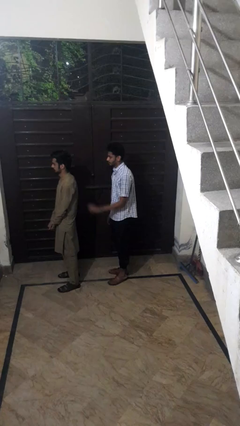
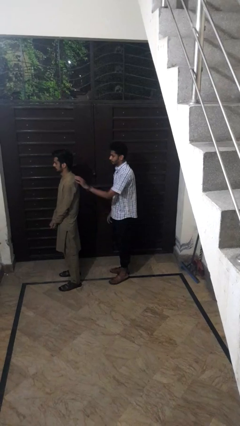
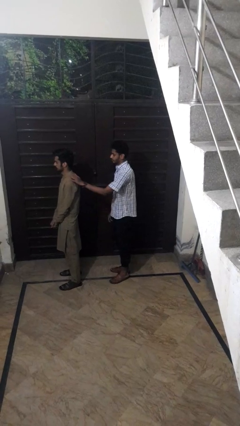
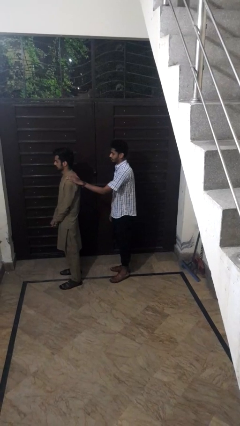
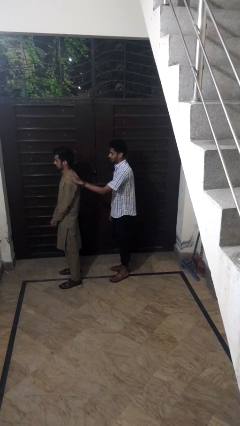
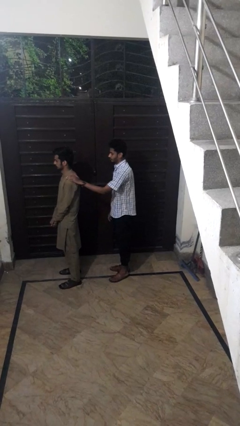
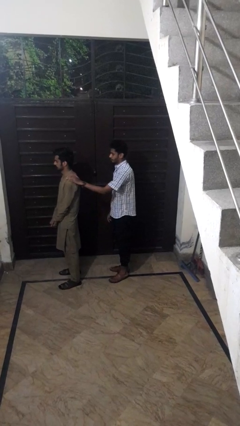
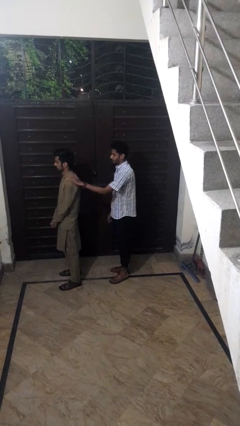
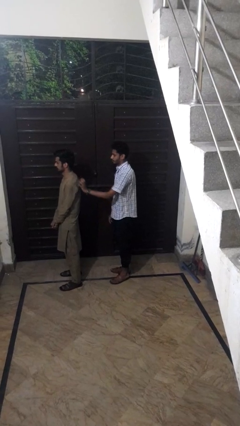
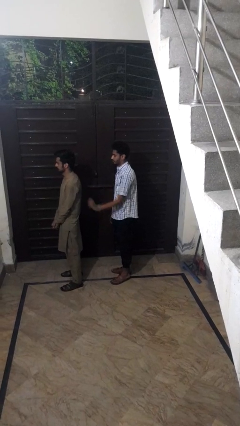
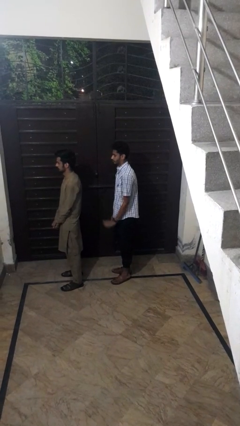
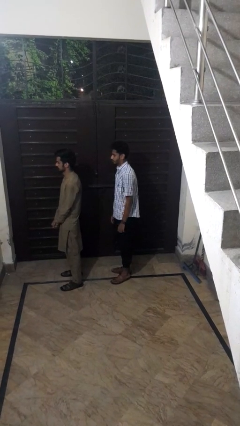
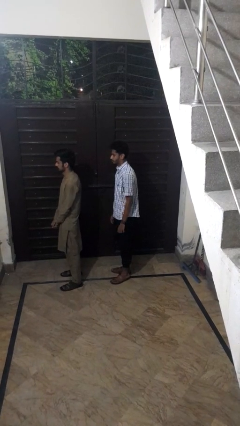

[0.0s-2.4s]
person touches back of person

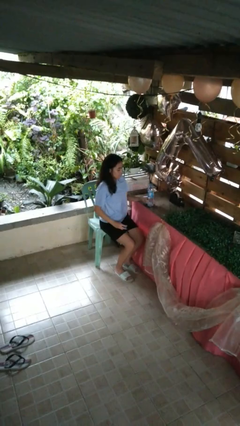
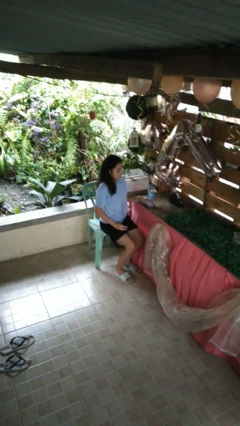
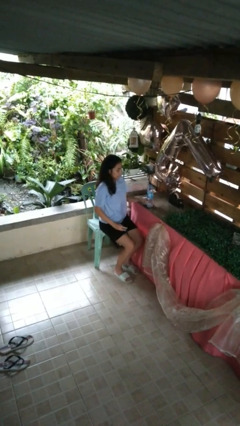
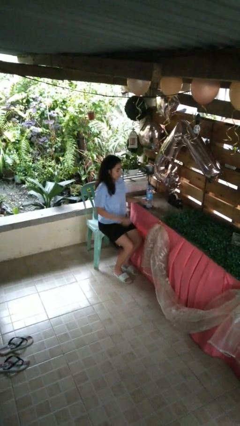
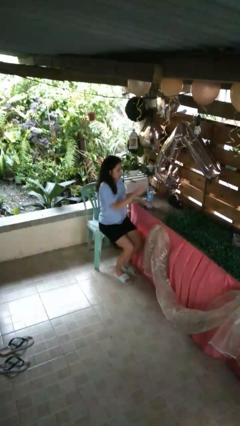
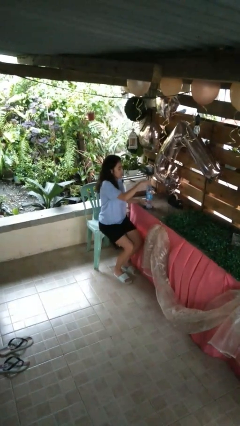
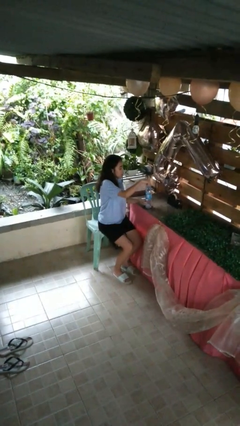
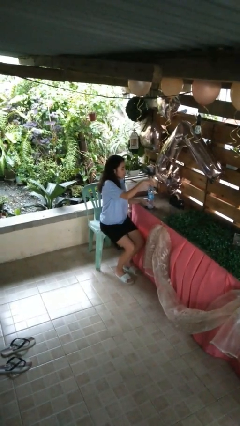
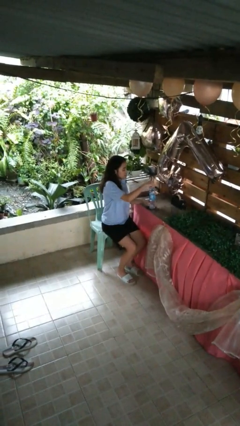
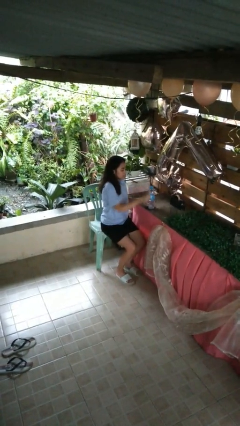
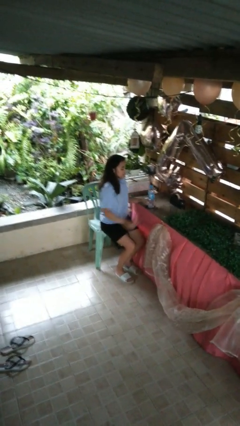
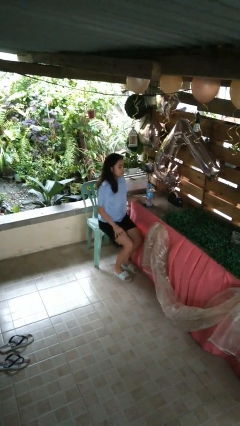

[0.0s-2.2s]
person screws lid to bottle

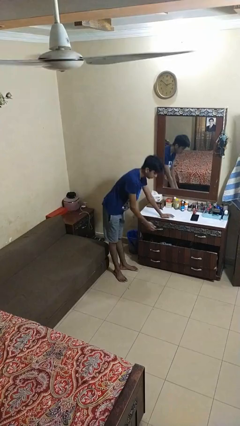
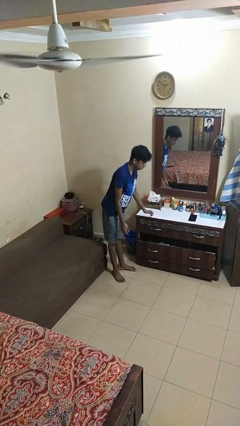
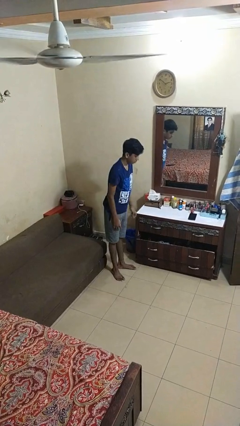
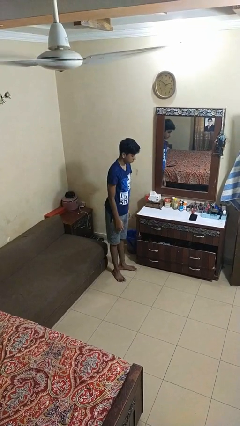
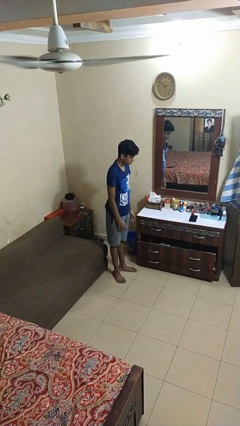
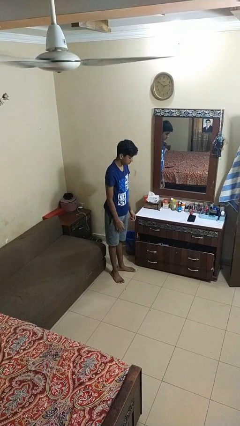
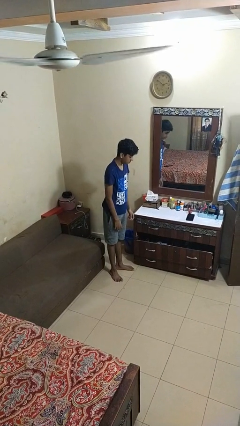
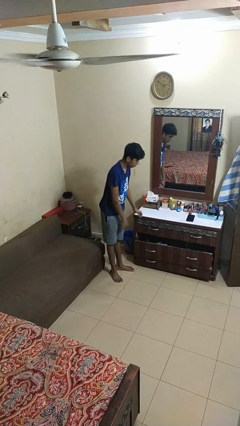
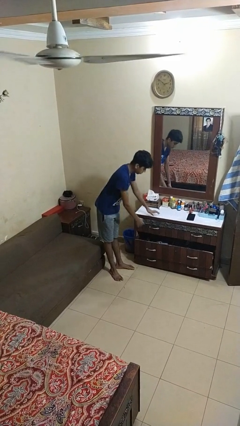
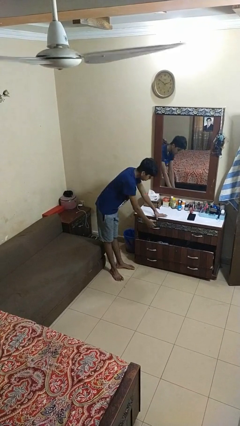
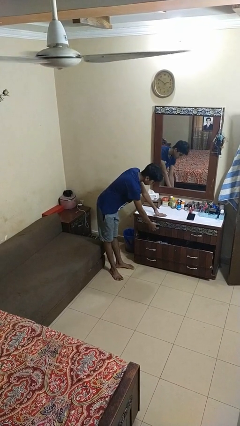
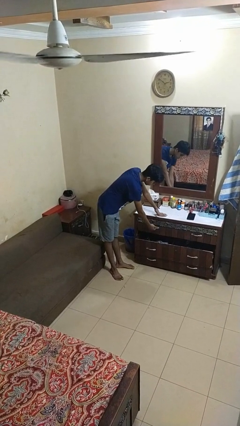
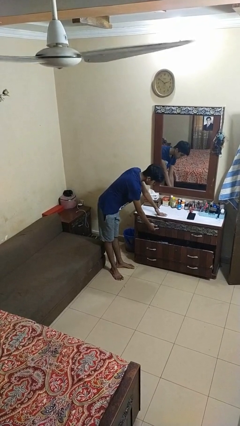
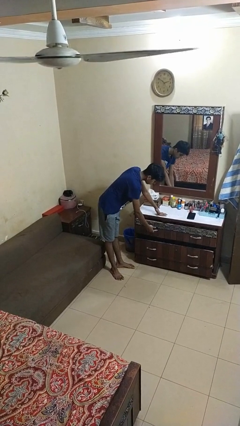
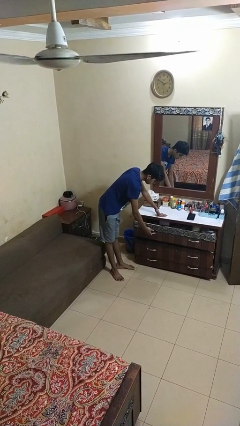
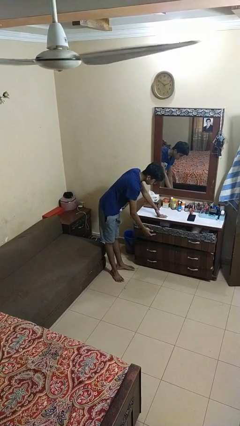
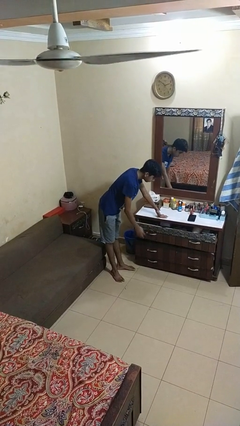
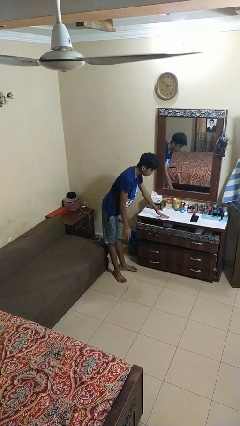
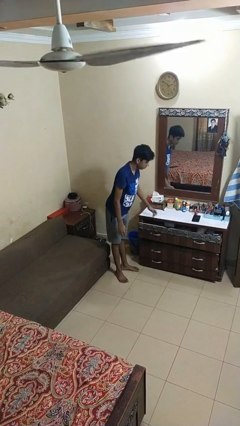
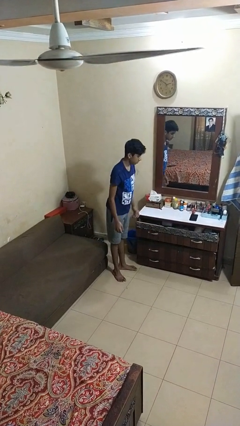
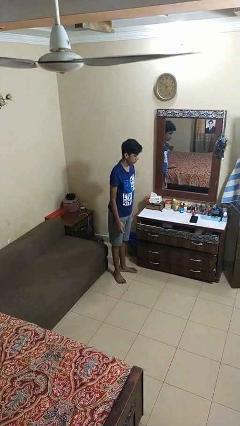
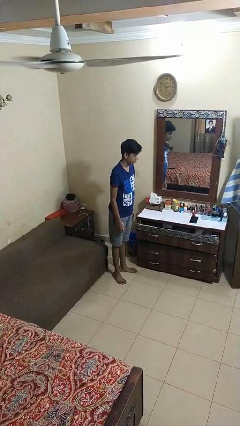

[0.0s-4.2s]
person opens dresser drawer

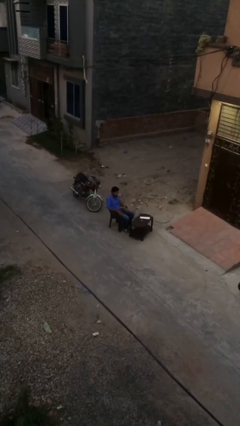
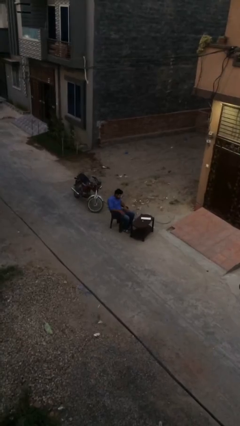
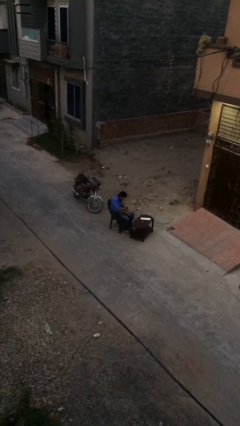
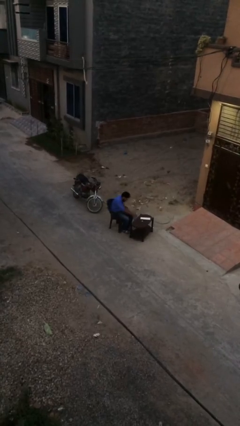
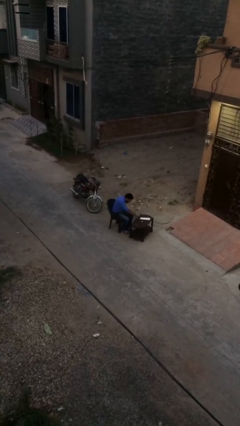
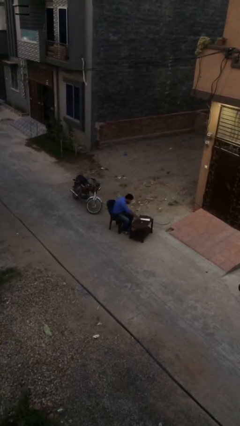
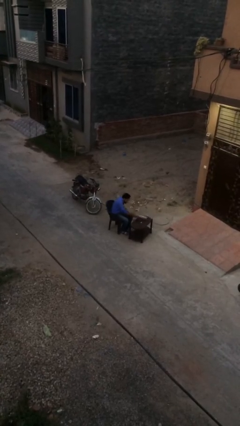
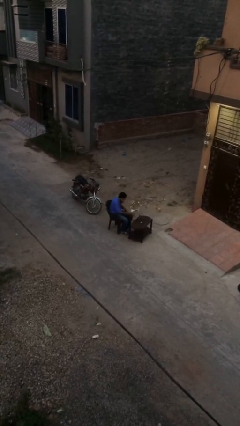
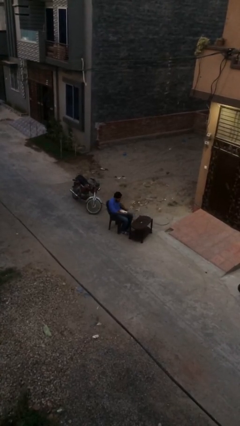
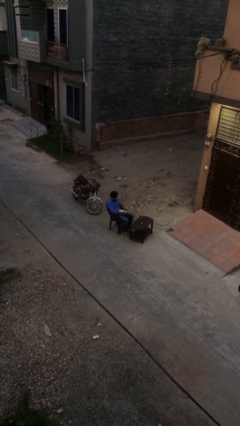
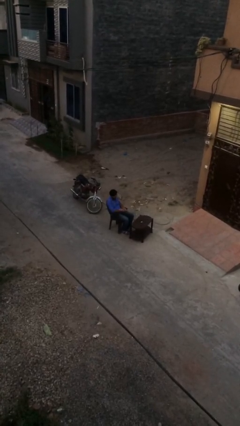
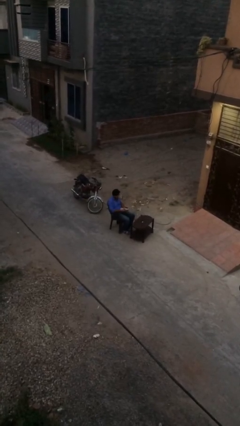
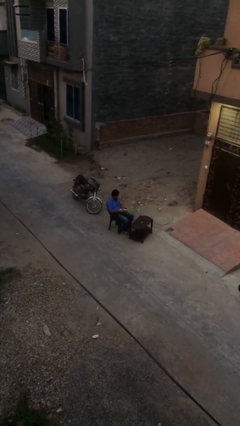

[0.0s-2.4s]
person picks up object from table

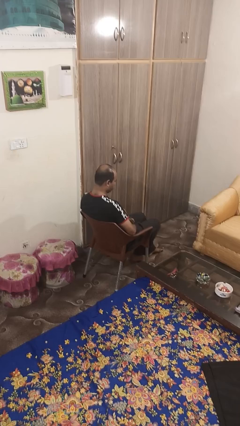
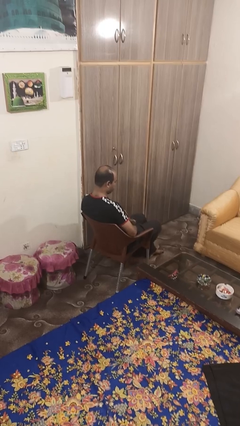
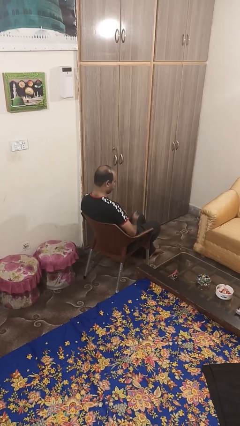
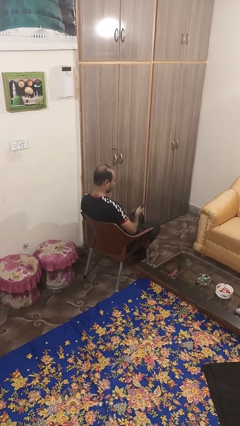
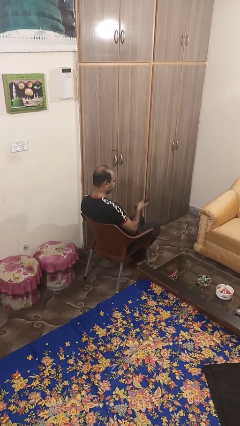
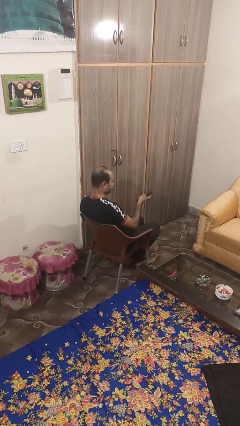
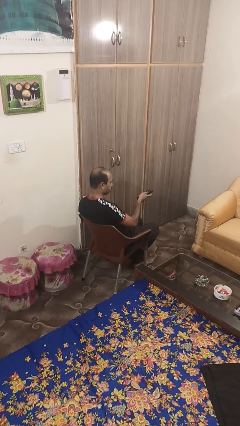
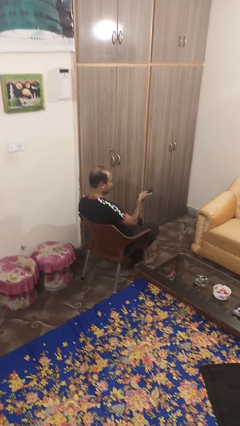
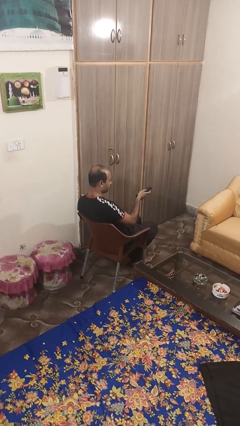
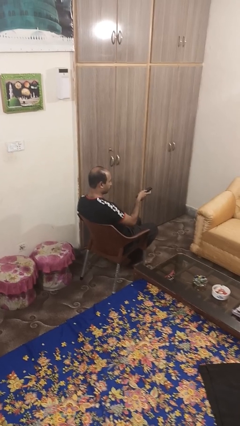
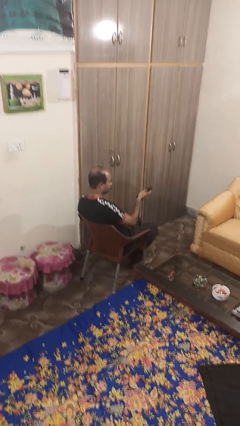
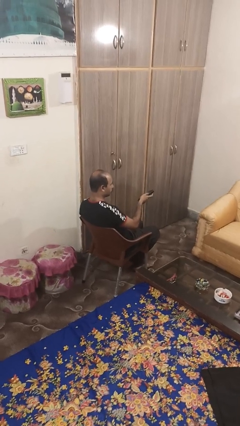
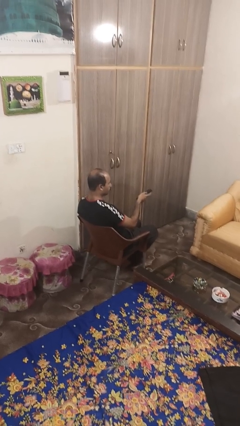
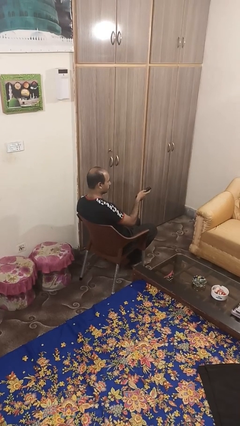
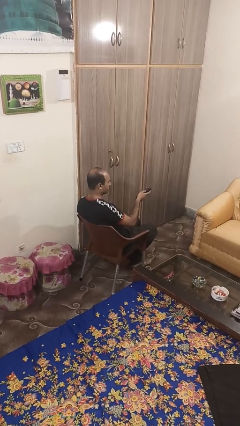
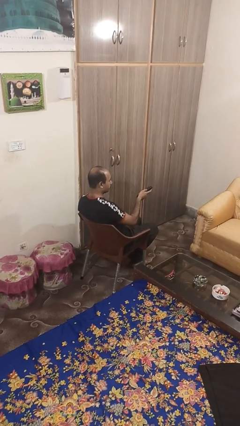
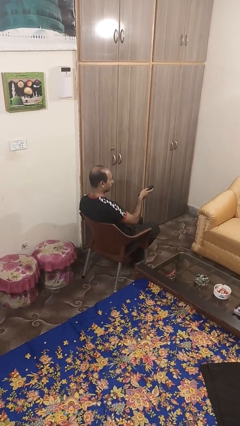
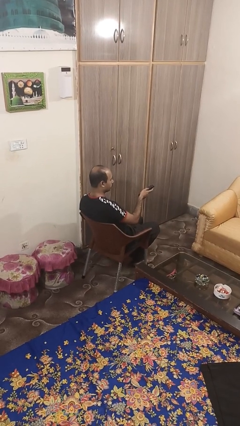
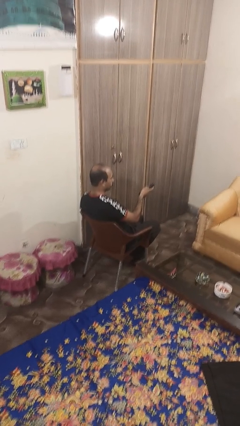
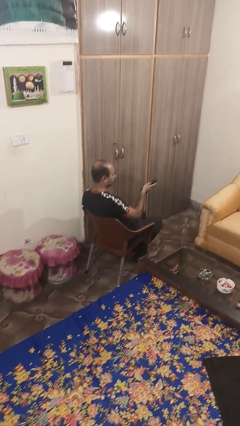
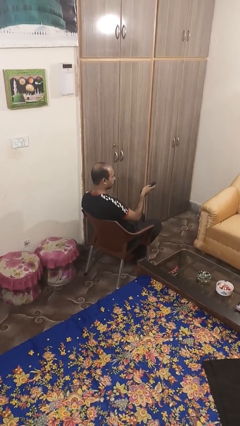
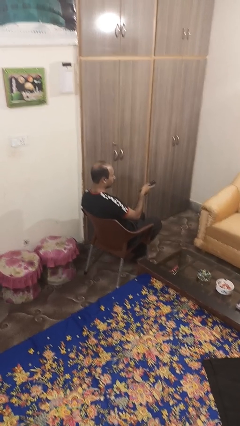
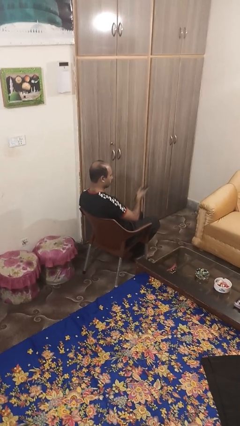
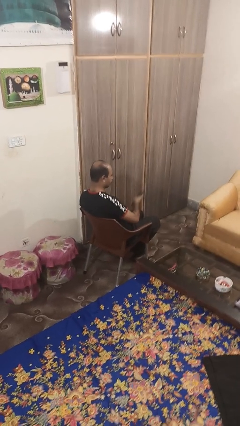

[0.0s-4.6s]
person uses television remote

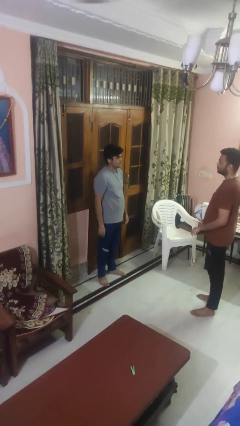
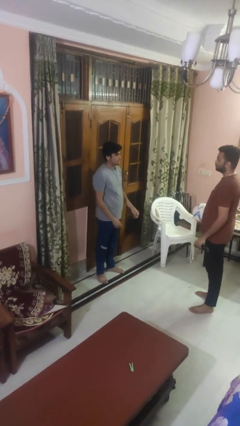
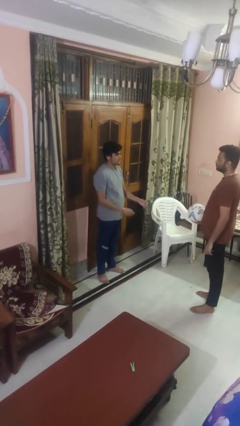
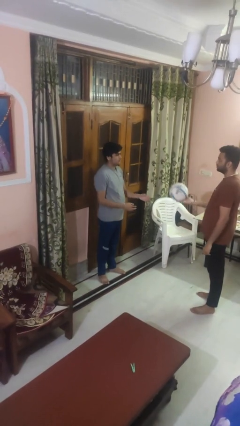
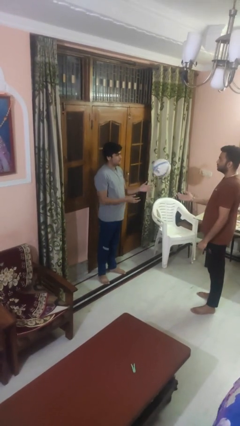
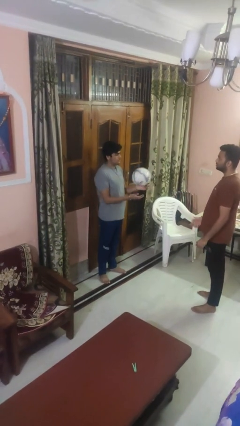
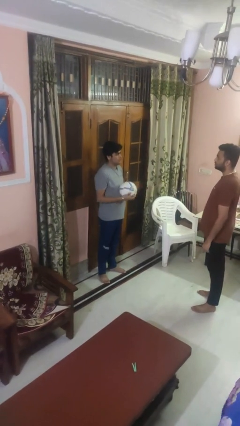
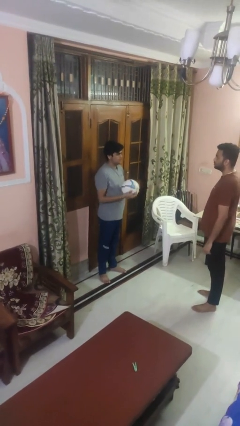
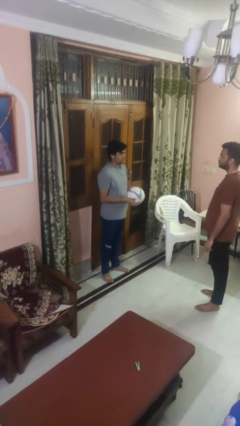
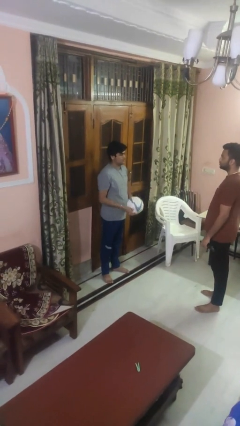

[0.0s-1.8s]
person catches object from person
